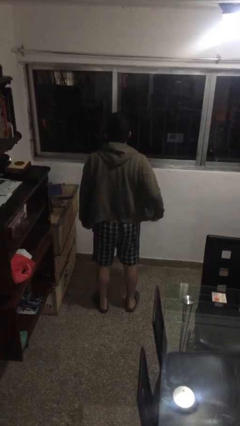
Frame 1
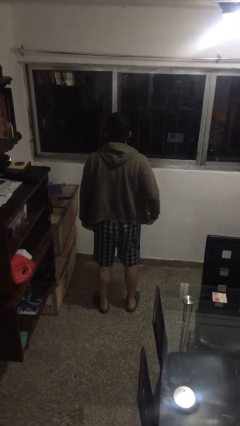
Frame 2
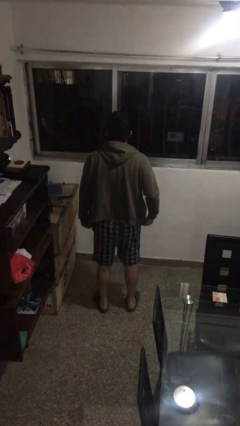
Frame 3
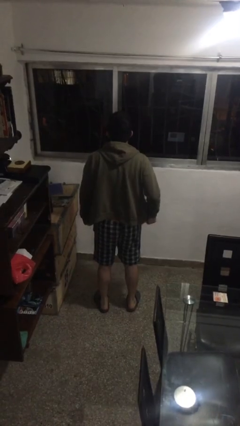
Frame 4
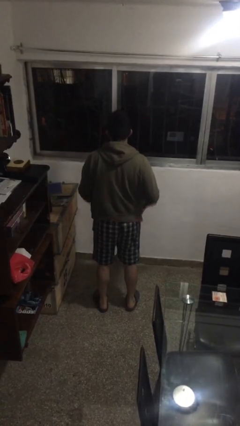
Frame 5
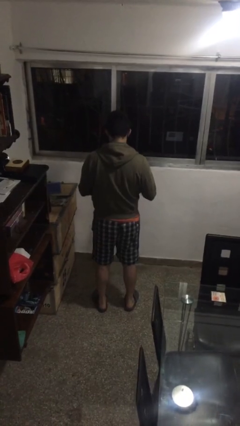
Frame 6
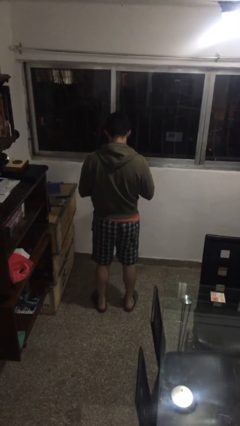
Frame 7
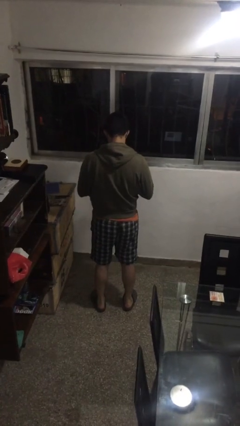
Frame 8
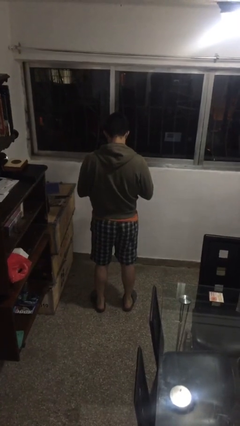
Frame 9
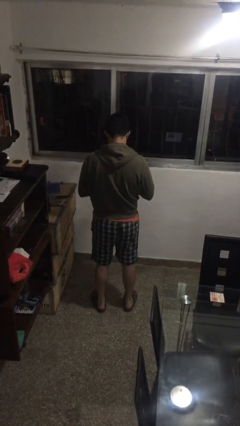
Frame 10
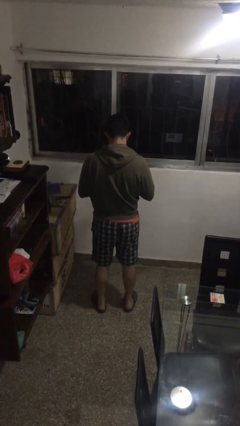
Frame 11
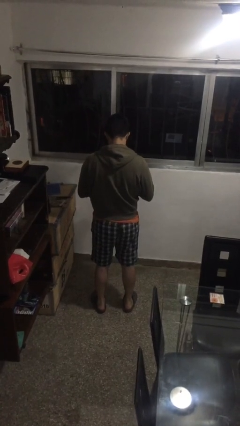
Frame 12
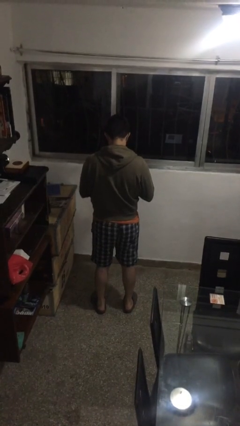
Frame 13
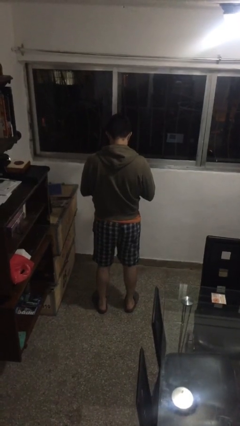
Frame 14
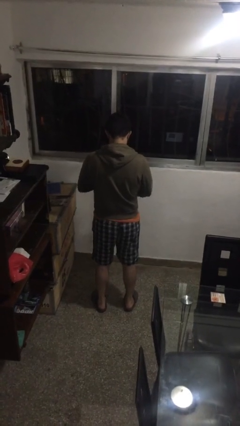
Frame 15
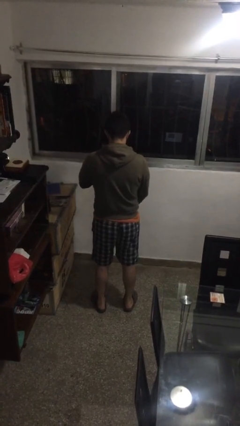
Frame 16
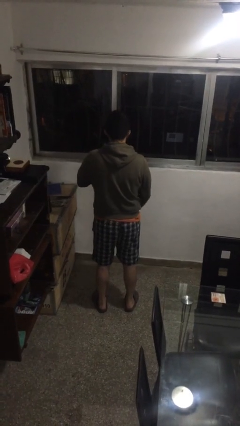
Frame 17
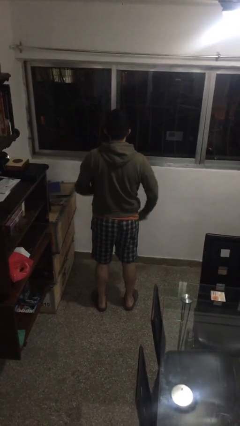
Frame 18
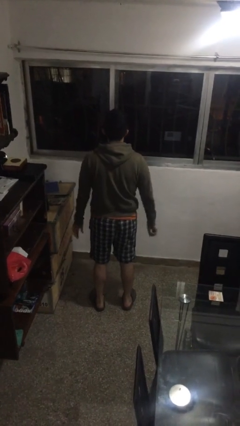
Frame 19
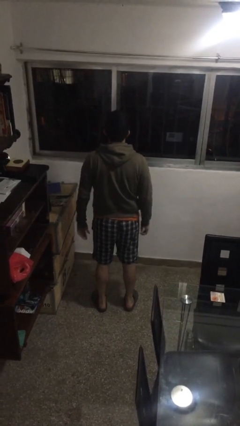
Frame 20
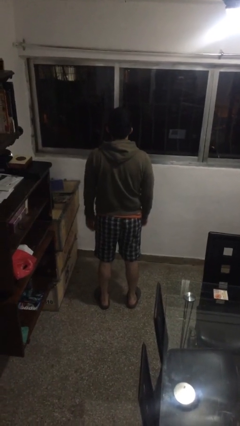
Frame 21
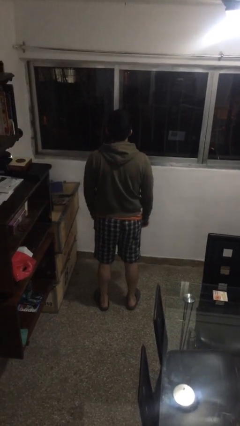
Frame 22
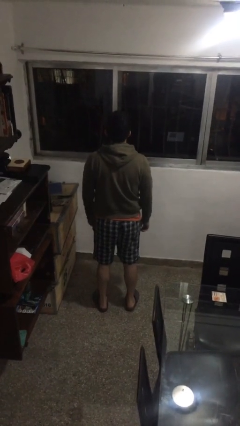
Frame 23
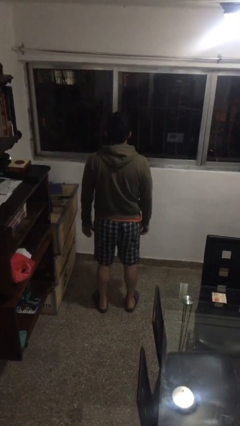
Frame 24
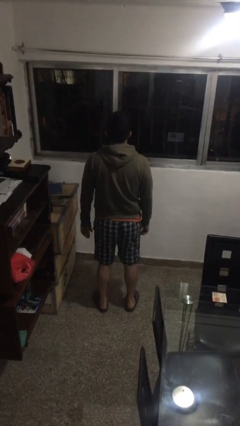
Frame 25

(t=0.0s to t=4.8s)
person zips up jacket

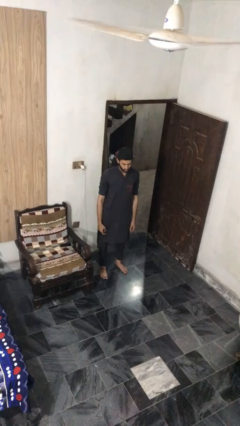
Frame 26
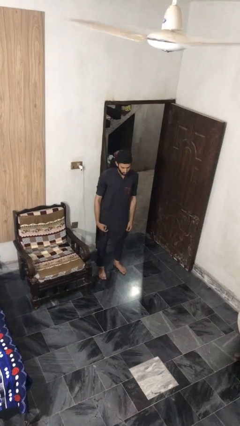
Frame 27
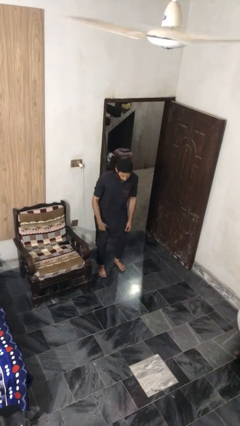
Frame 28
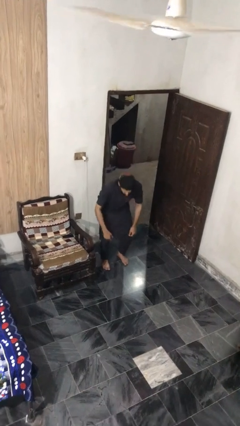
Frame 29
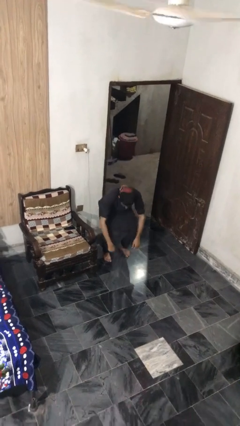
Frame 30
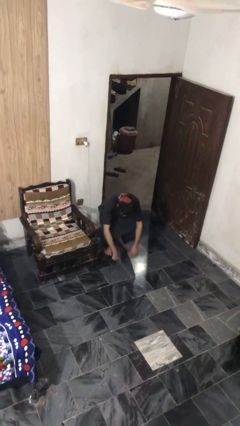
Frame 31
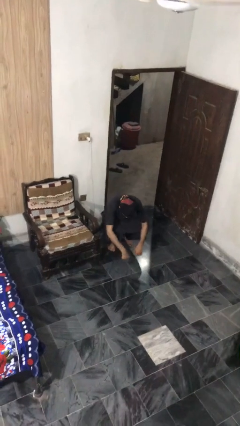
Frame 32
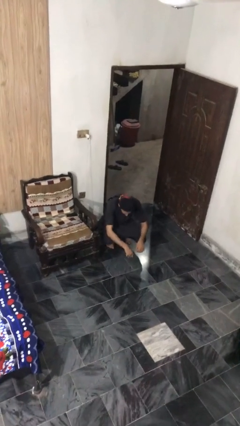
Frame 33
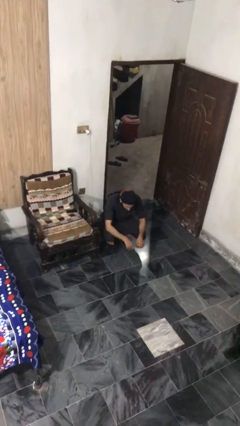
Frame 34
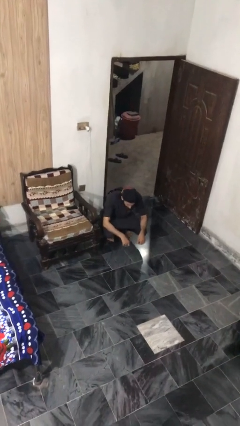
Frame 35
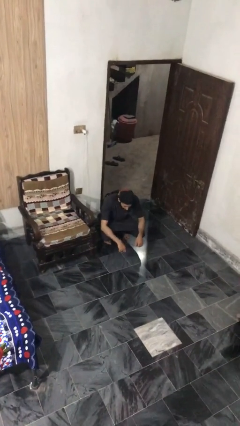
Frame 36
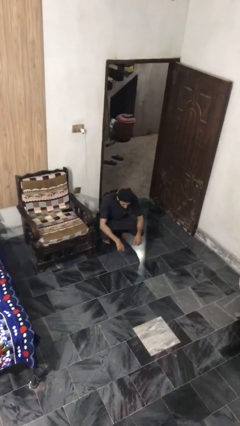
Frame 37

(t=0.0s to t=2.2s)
person squats

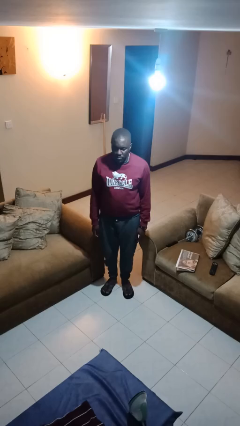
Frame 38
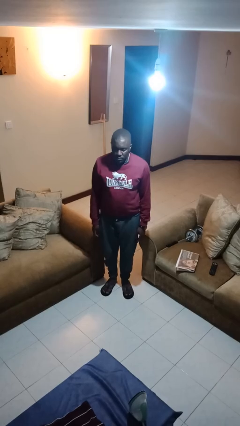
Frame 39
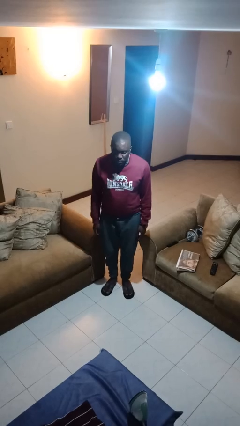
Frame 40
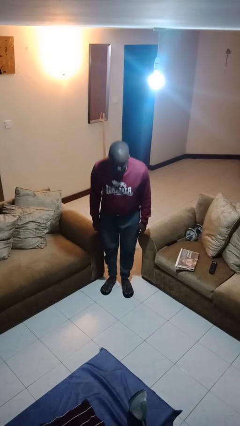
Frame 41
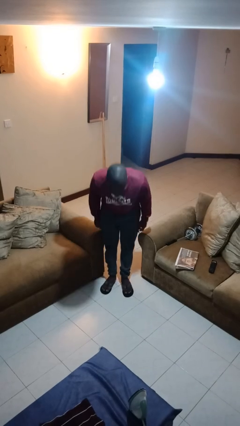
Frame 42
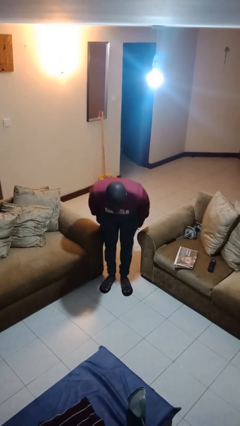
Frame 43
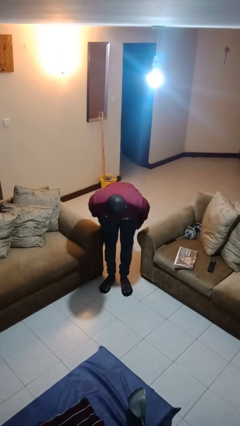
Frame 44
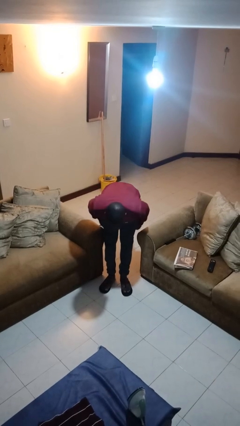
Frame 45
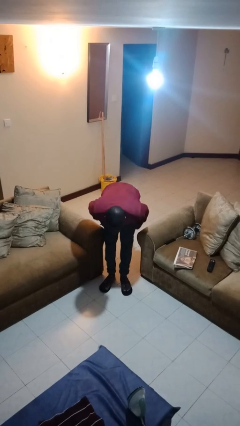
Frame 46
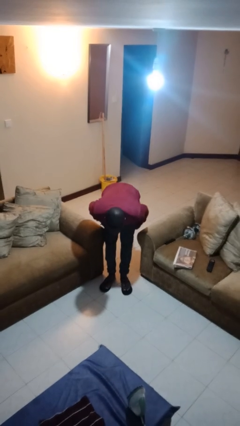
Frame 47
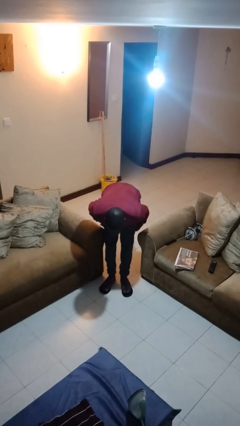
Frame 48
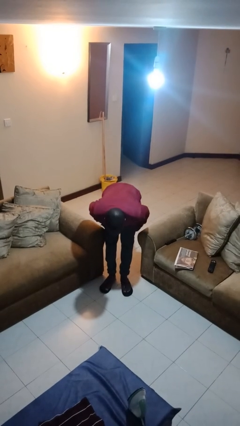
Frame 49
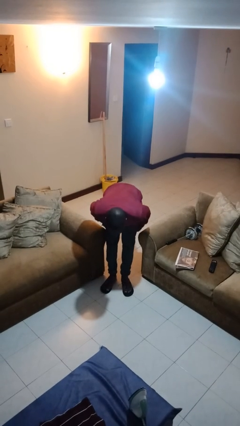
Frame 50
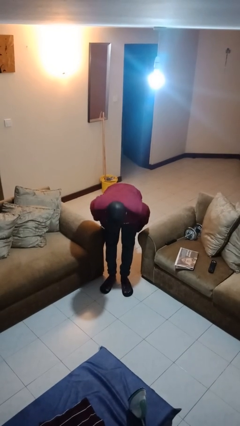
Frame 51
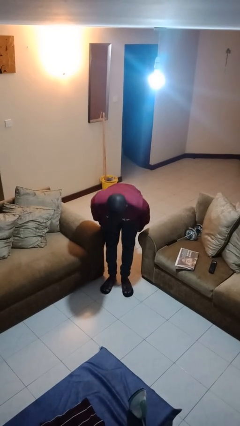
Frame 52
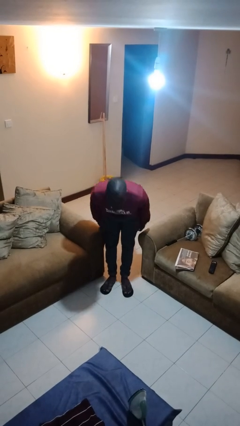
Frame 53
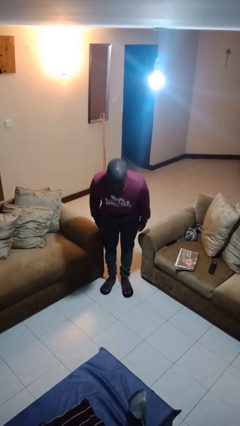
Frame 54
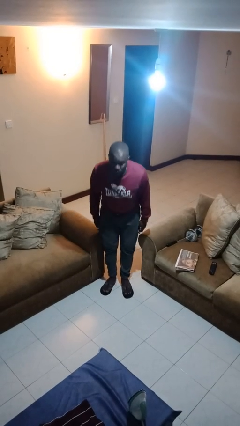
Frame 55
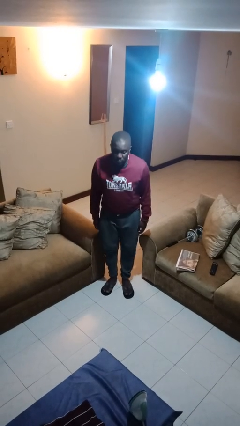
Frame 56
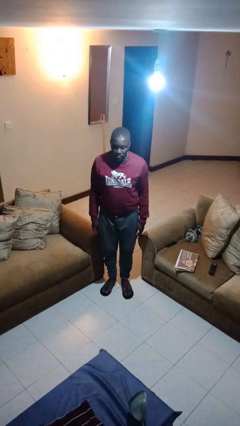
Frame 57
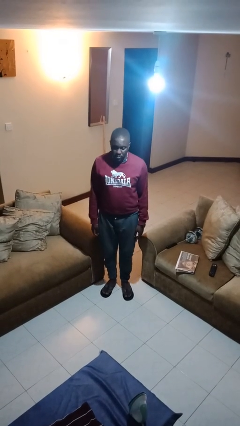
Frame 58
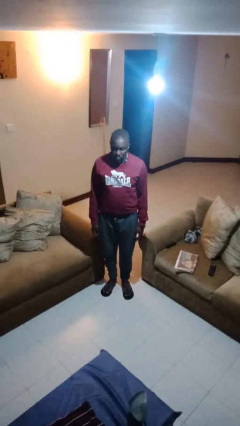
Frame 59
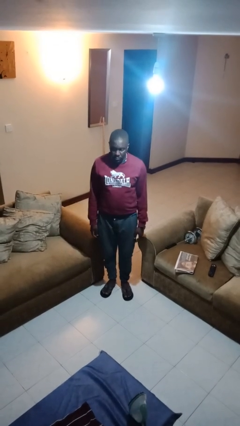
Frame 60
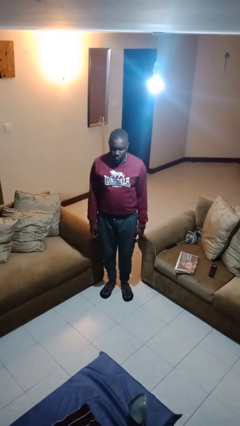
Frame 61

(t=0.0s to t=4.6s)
person bows

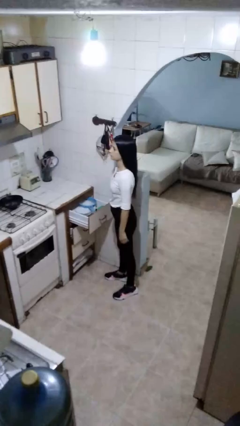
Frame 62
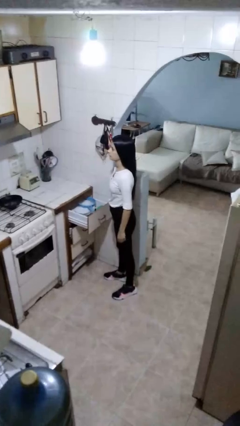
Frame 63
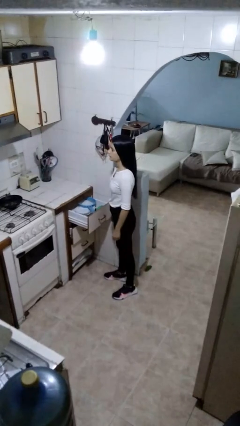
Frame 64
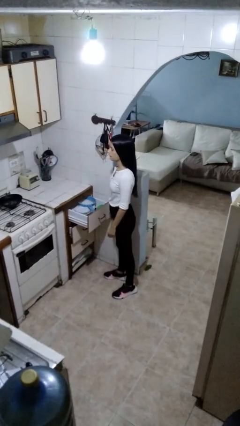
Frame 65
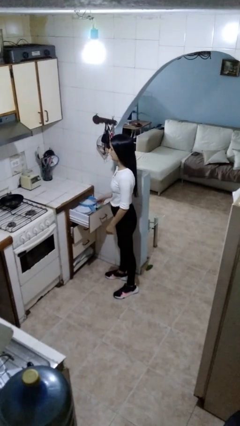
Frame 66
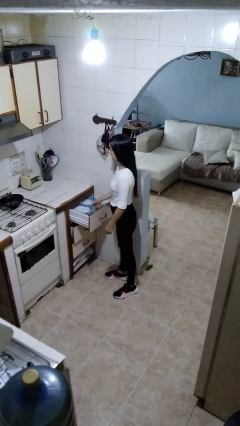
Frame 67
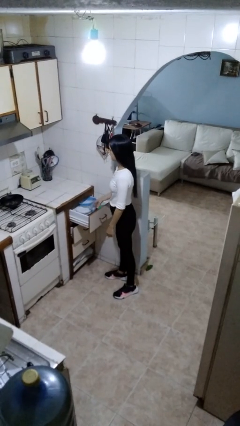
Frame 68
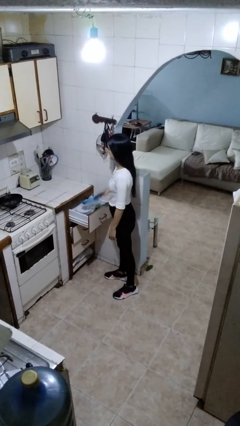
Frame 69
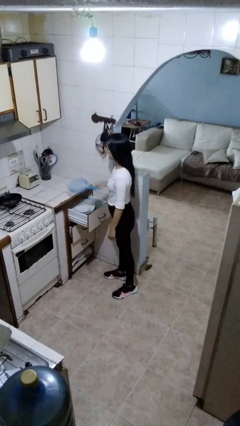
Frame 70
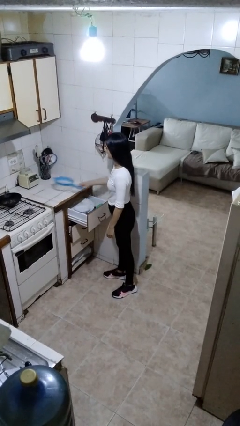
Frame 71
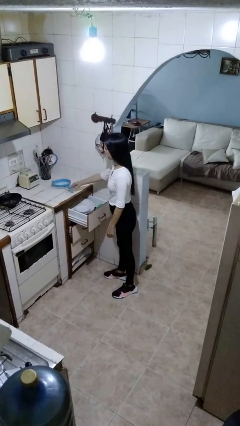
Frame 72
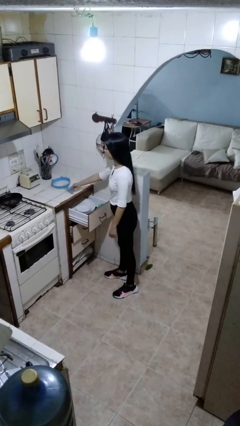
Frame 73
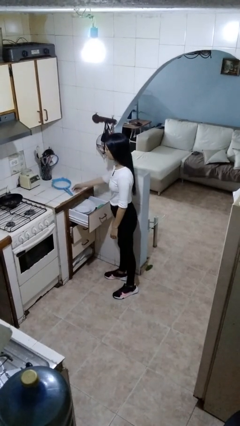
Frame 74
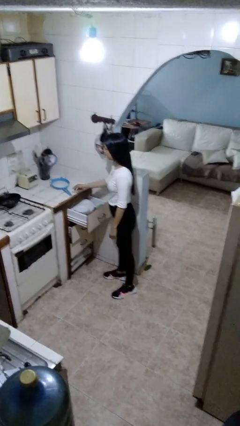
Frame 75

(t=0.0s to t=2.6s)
person takes object from kitchen drawer

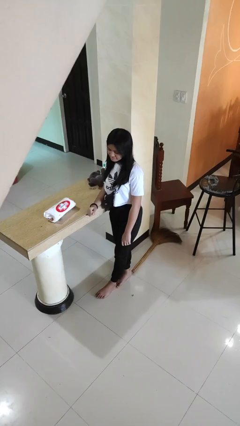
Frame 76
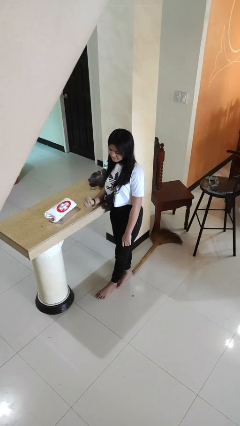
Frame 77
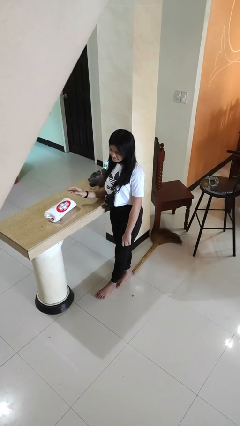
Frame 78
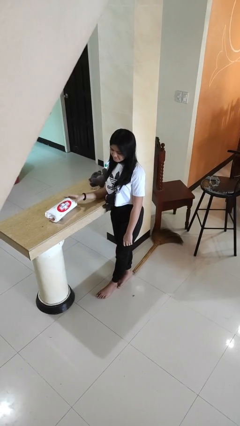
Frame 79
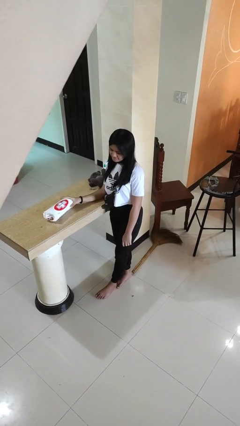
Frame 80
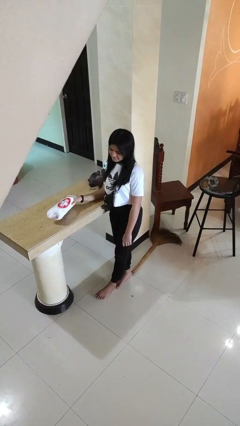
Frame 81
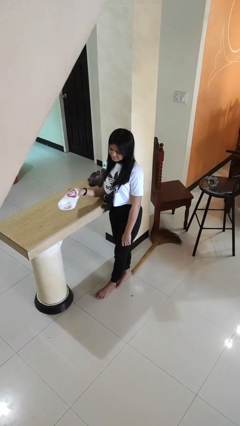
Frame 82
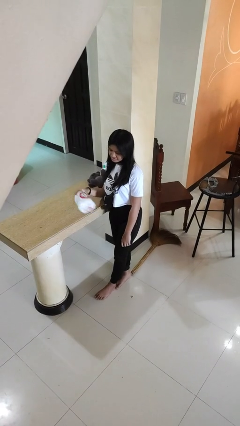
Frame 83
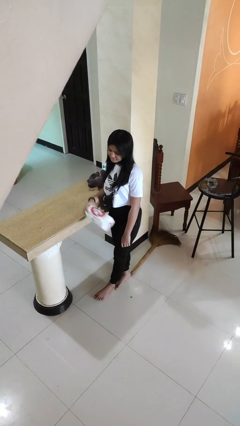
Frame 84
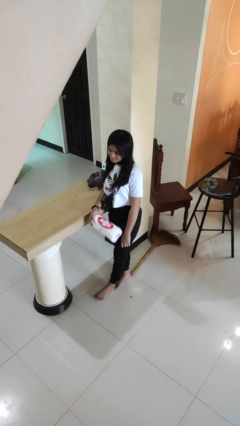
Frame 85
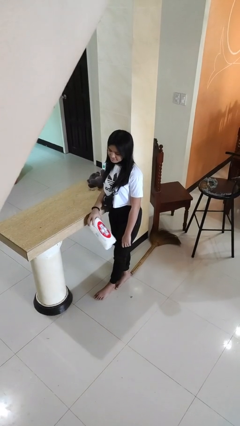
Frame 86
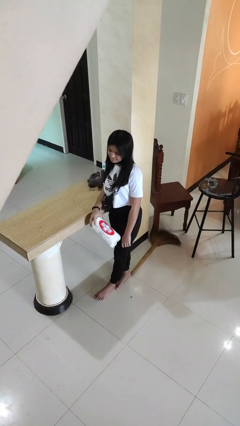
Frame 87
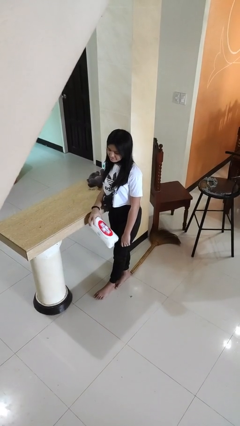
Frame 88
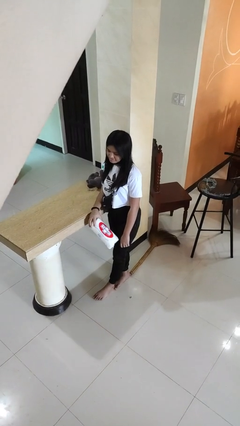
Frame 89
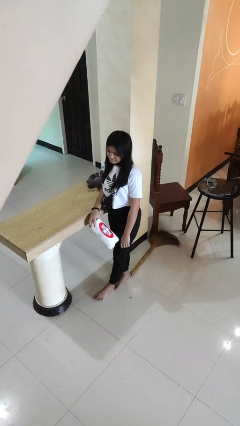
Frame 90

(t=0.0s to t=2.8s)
person picks up object from countertop

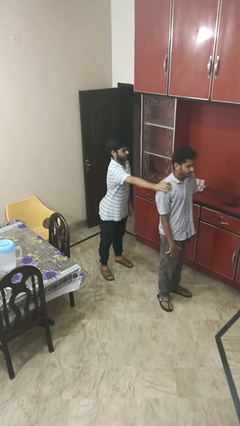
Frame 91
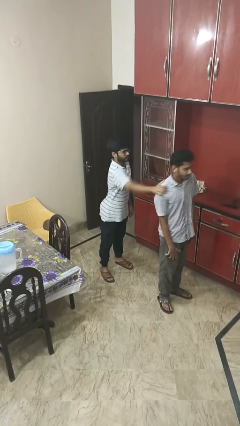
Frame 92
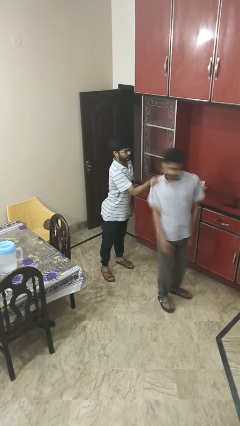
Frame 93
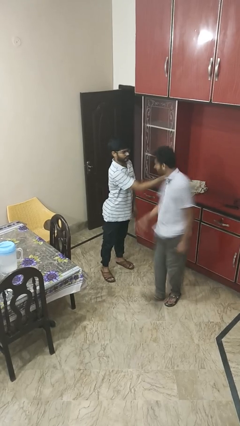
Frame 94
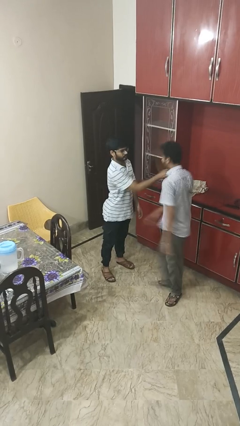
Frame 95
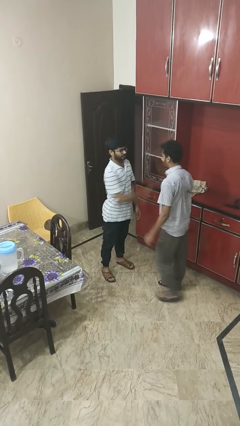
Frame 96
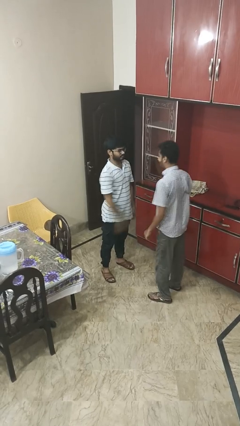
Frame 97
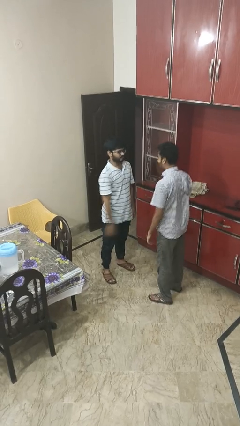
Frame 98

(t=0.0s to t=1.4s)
person spins person around
